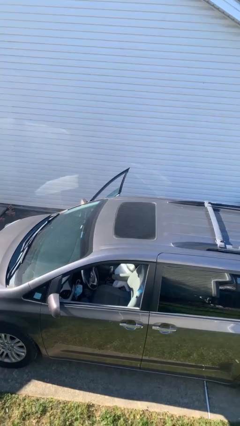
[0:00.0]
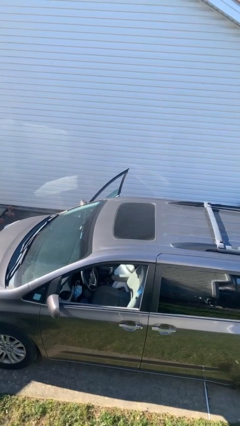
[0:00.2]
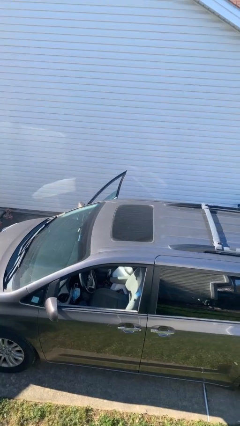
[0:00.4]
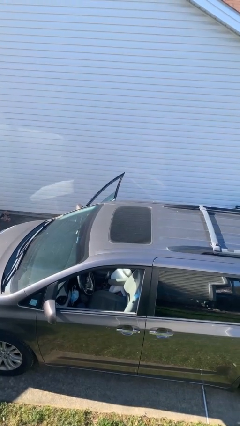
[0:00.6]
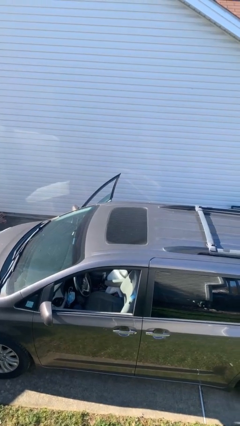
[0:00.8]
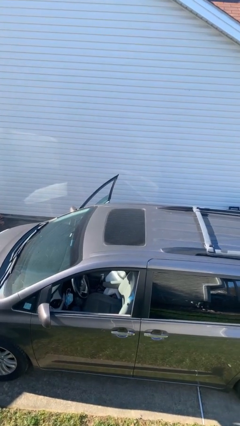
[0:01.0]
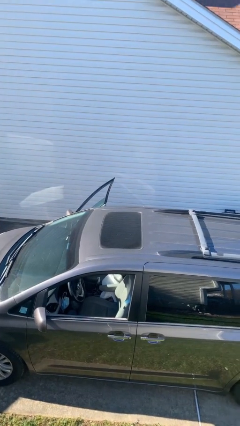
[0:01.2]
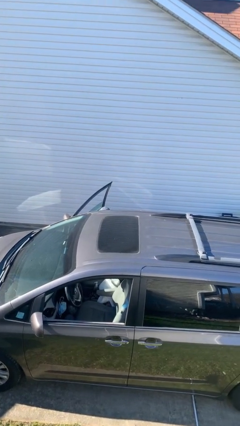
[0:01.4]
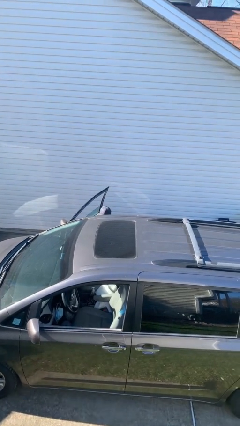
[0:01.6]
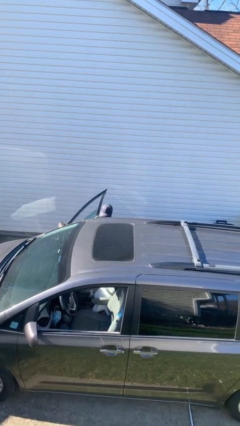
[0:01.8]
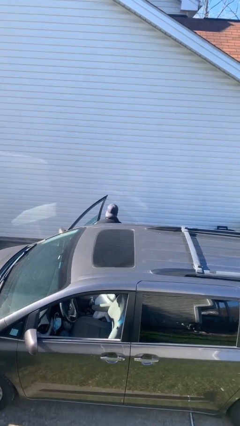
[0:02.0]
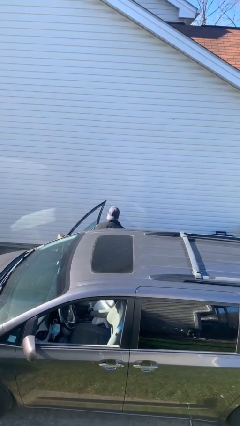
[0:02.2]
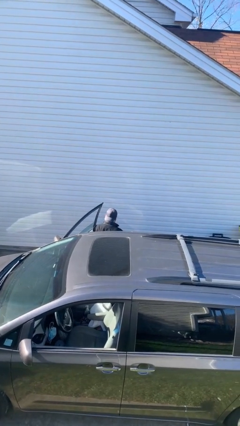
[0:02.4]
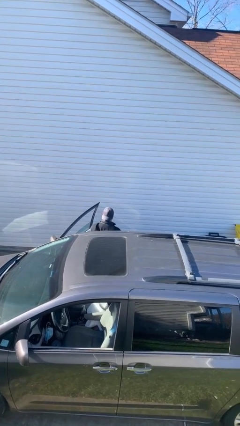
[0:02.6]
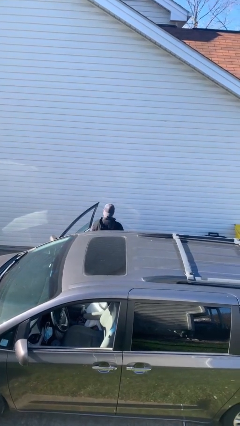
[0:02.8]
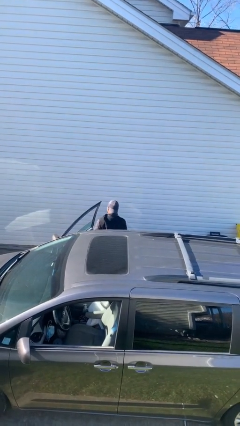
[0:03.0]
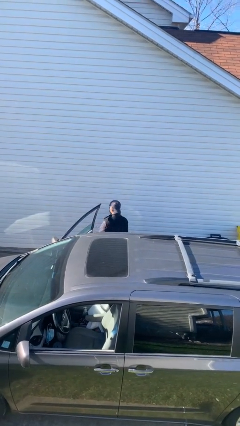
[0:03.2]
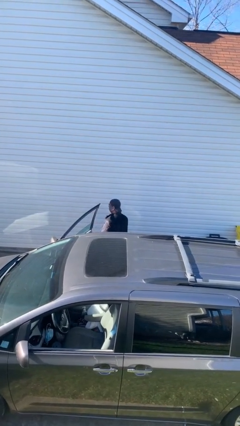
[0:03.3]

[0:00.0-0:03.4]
person exits car

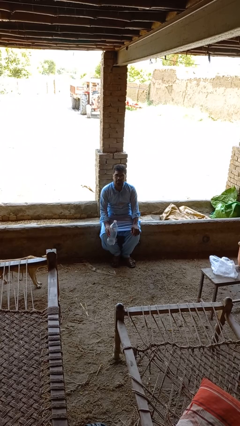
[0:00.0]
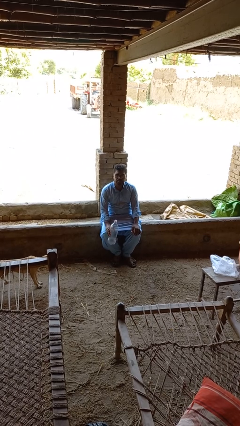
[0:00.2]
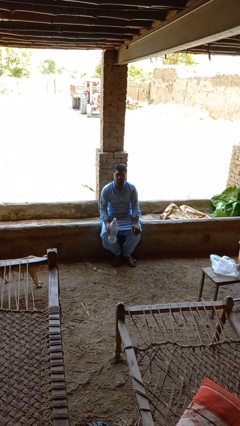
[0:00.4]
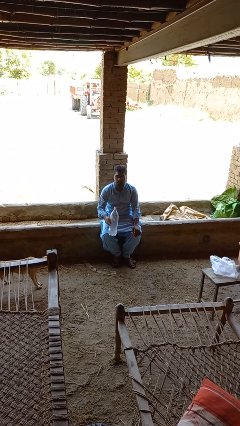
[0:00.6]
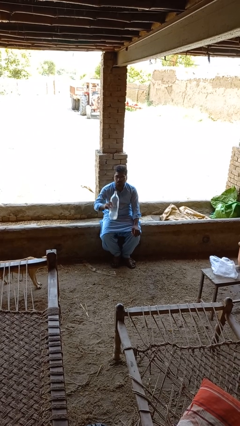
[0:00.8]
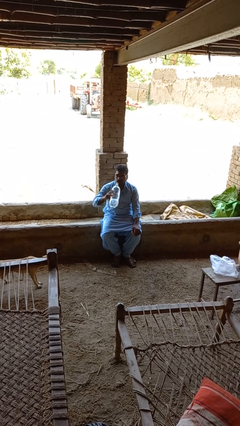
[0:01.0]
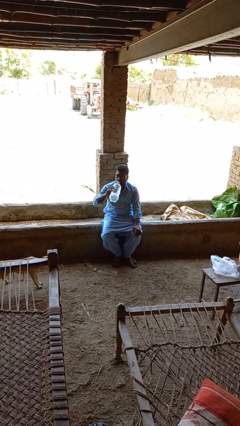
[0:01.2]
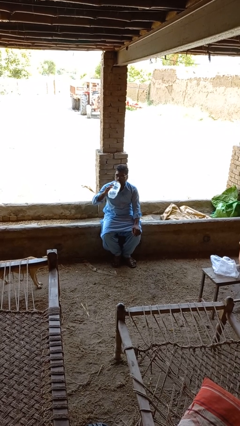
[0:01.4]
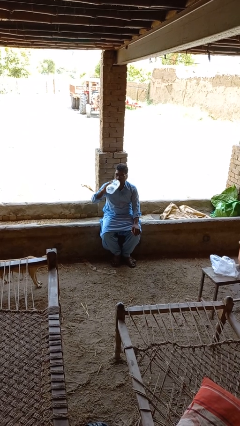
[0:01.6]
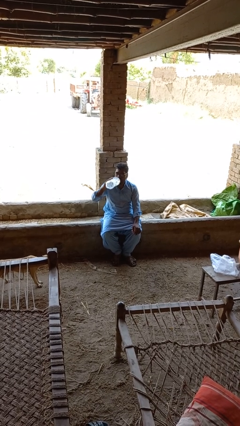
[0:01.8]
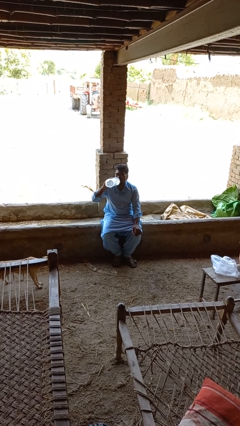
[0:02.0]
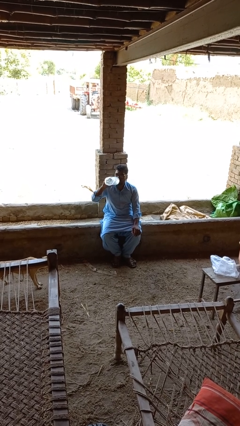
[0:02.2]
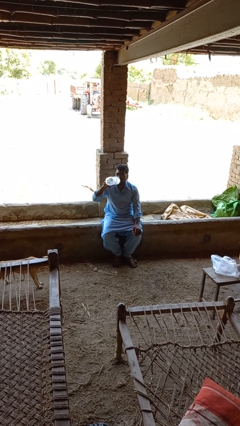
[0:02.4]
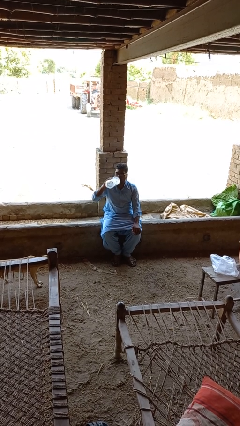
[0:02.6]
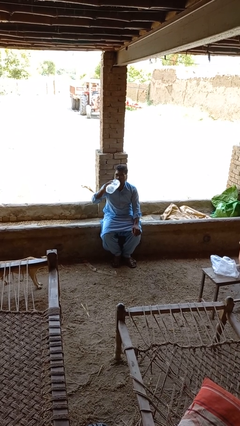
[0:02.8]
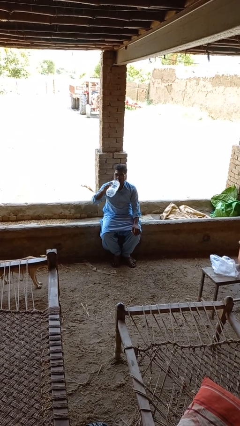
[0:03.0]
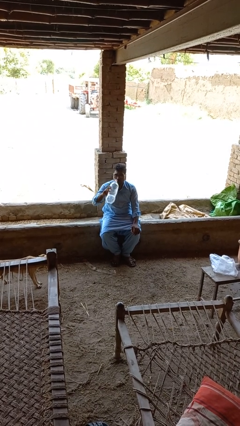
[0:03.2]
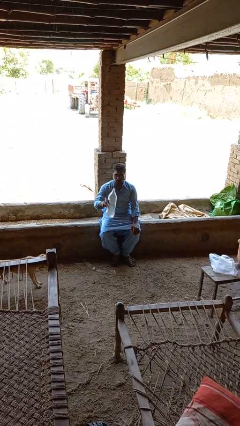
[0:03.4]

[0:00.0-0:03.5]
person drinks from bottle

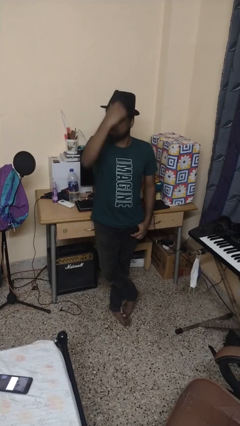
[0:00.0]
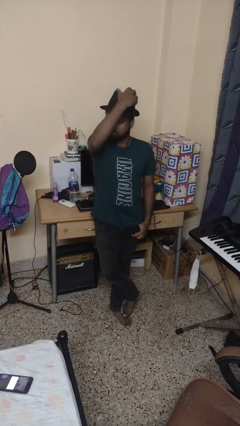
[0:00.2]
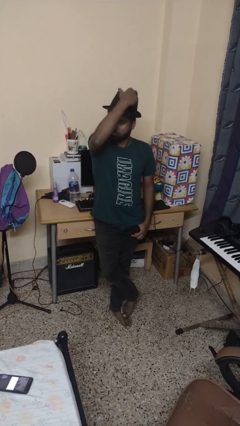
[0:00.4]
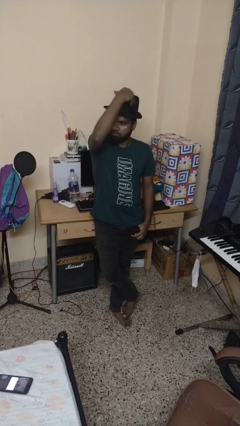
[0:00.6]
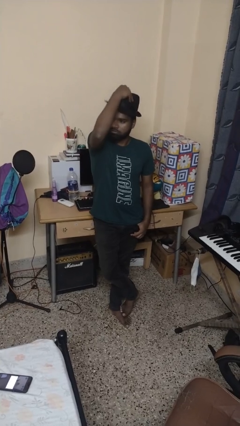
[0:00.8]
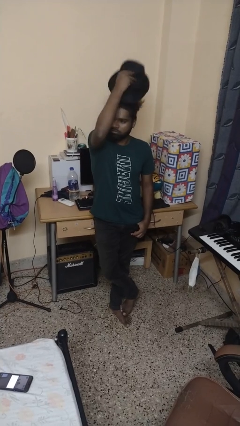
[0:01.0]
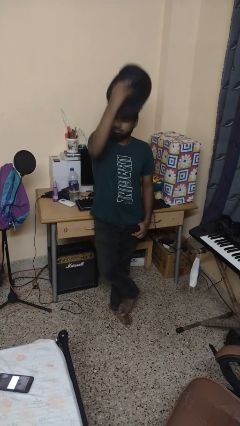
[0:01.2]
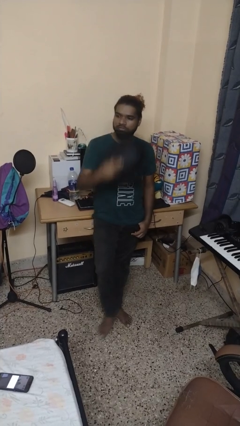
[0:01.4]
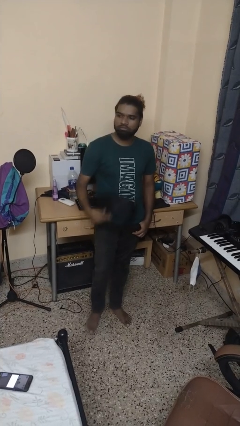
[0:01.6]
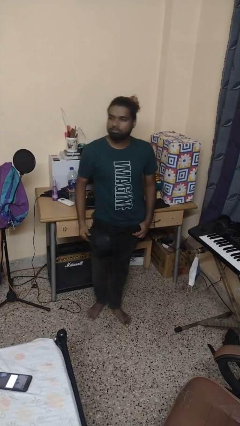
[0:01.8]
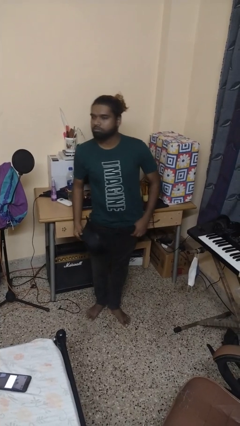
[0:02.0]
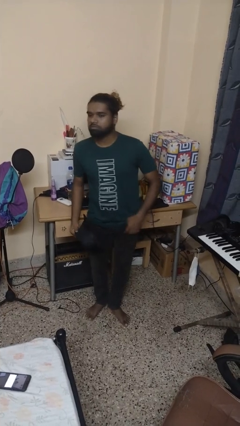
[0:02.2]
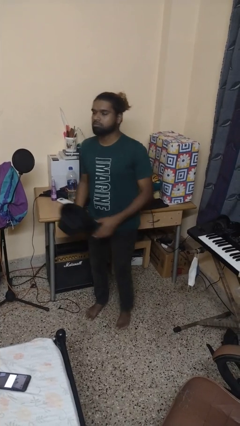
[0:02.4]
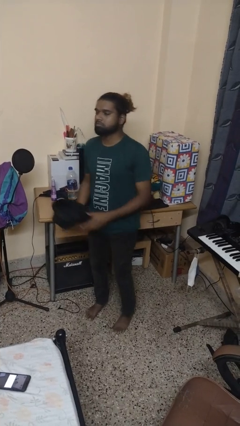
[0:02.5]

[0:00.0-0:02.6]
person takes off hat

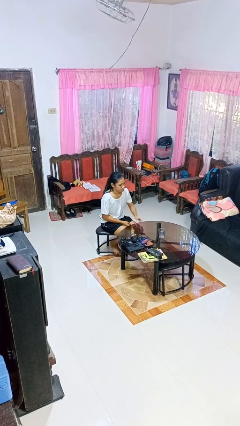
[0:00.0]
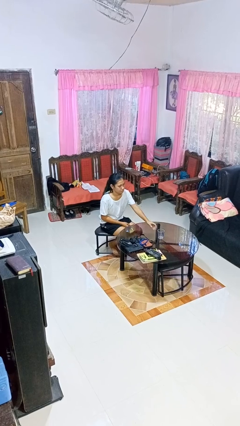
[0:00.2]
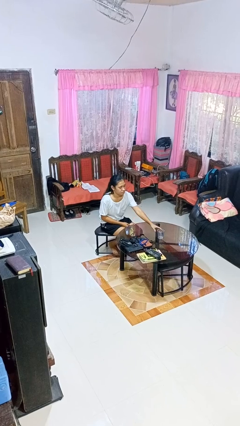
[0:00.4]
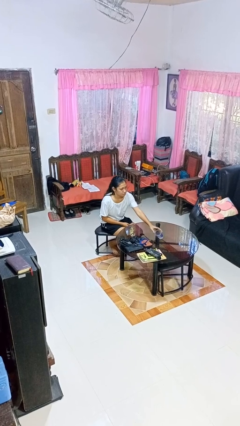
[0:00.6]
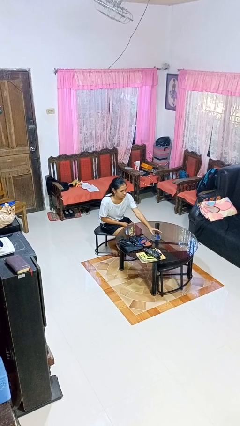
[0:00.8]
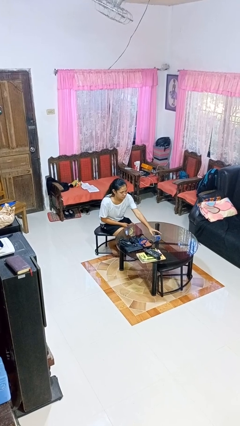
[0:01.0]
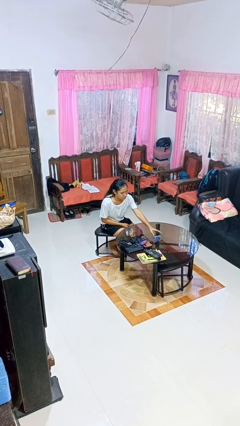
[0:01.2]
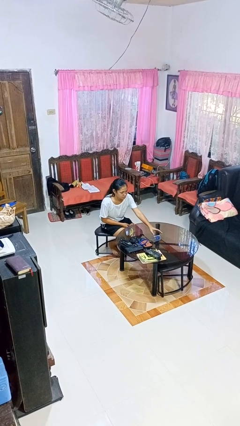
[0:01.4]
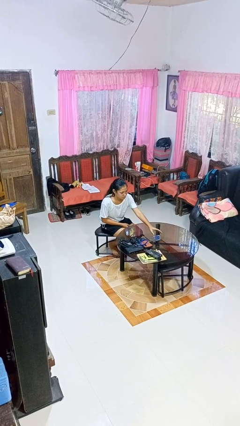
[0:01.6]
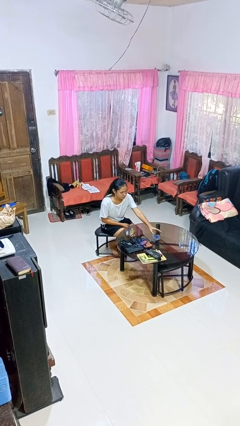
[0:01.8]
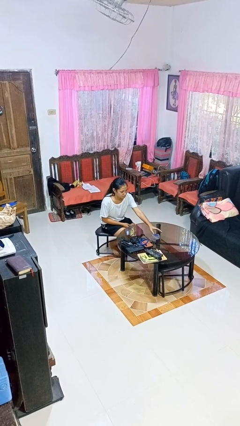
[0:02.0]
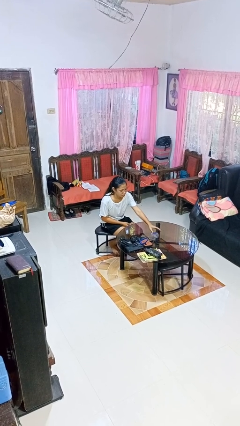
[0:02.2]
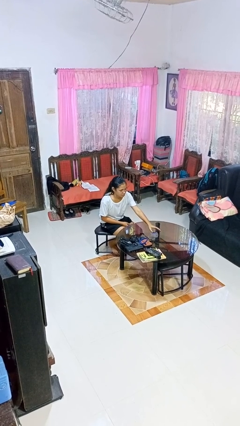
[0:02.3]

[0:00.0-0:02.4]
person knocks over glass

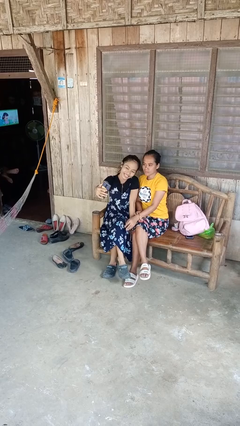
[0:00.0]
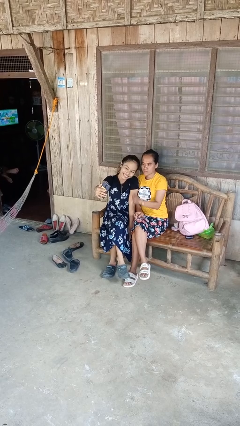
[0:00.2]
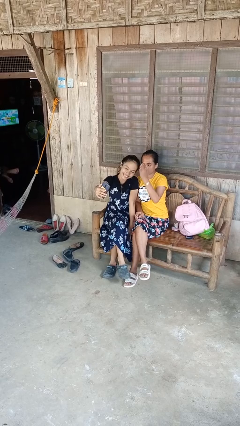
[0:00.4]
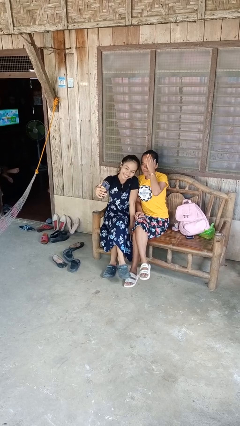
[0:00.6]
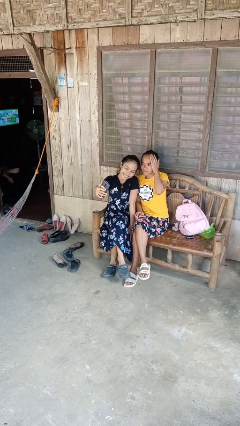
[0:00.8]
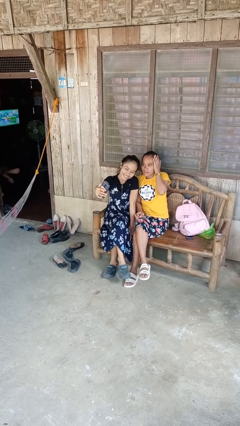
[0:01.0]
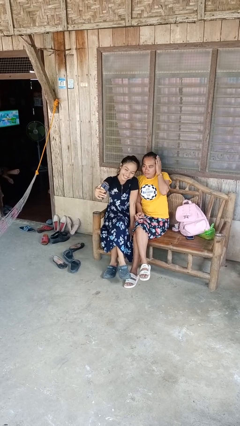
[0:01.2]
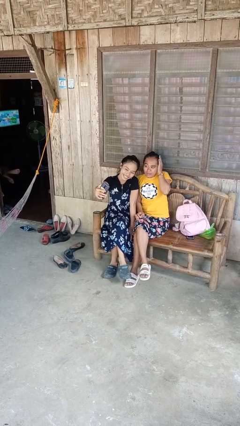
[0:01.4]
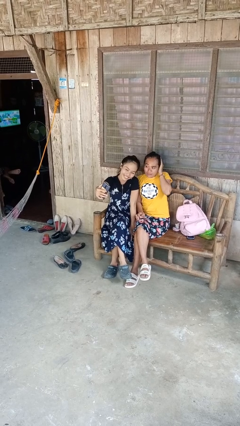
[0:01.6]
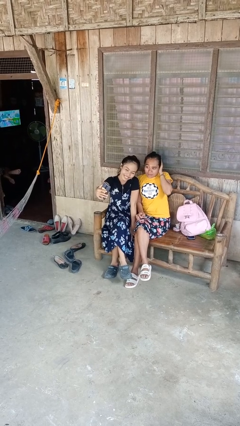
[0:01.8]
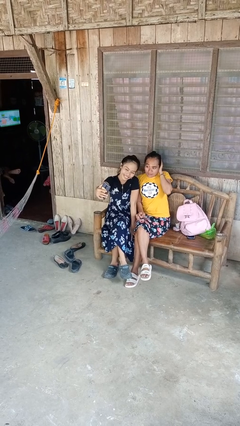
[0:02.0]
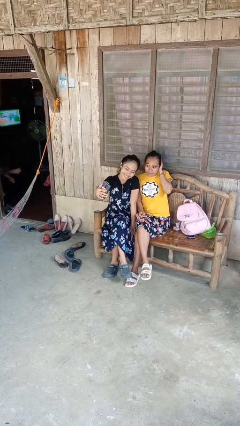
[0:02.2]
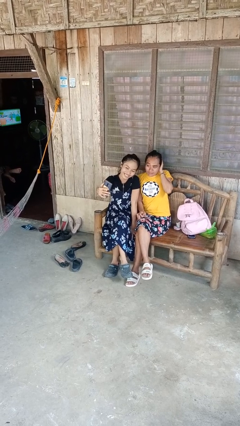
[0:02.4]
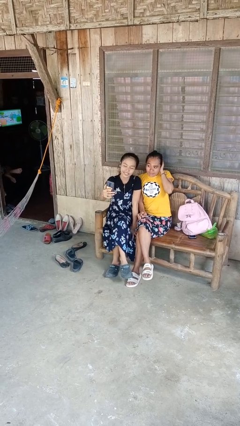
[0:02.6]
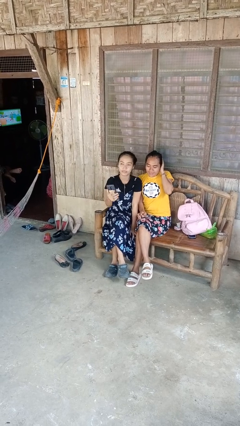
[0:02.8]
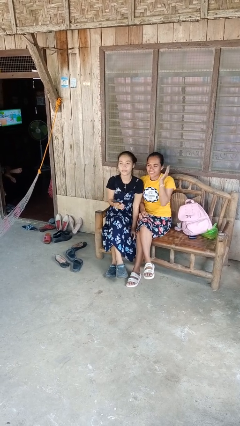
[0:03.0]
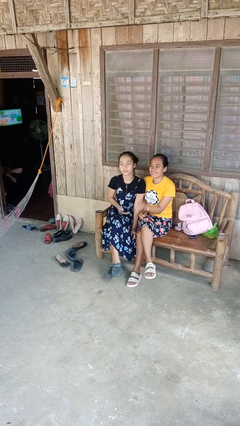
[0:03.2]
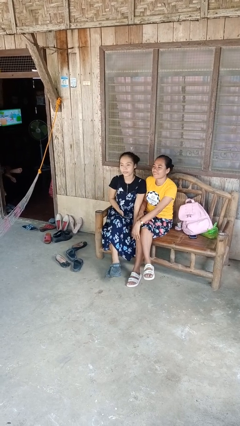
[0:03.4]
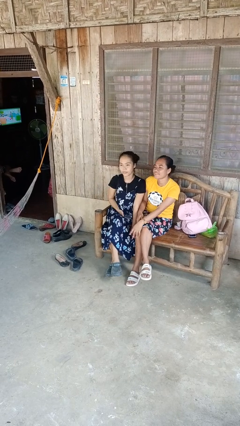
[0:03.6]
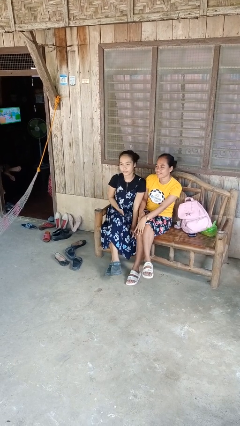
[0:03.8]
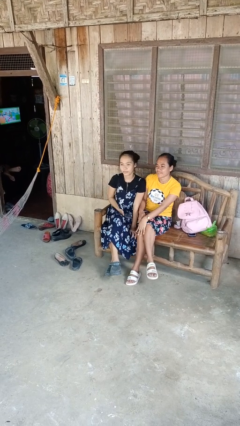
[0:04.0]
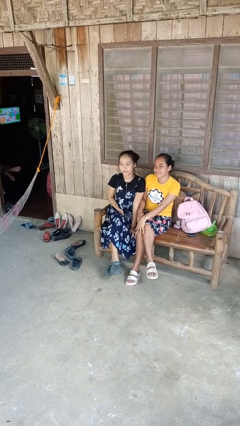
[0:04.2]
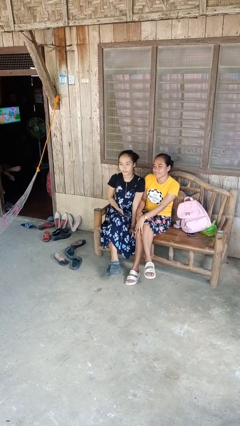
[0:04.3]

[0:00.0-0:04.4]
person takes selfie with person

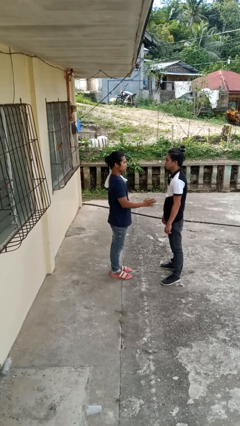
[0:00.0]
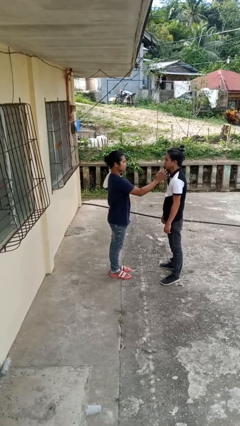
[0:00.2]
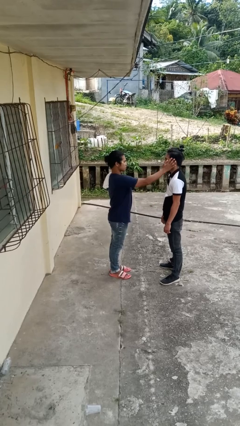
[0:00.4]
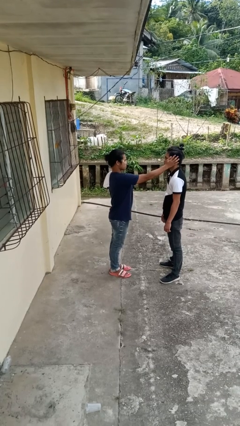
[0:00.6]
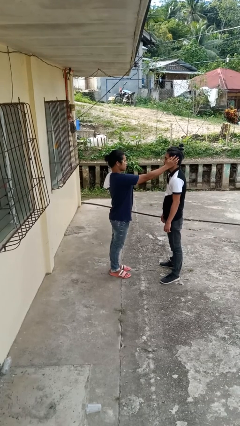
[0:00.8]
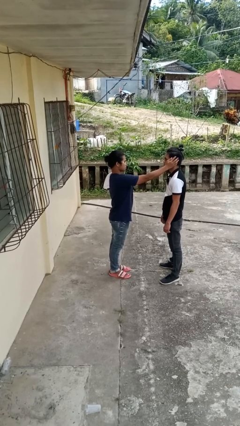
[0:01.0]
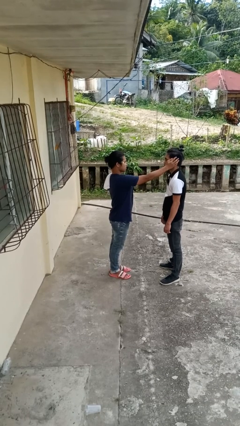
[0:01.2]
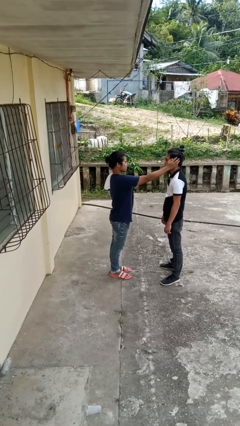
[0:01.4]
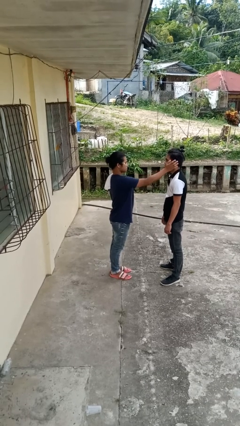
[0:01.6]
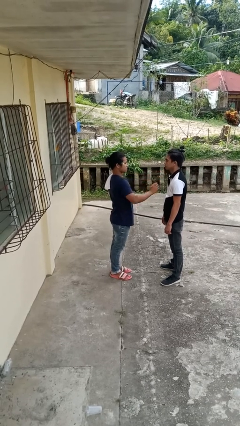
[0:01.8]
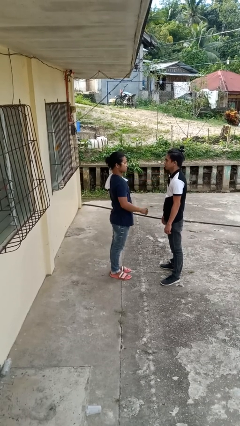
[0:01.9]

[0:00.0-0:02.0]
person touches face of person
